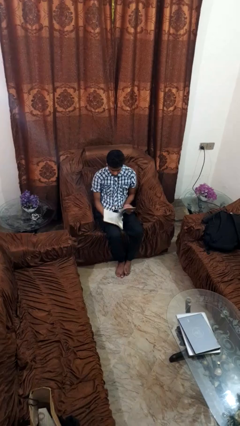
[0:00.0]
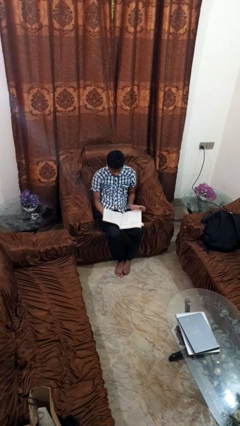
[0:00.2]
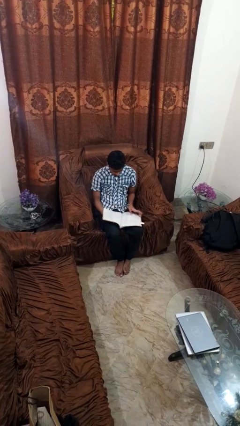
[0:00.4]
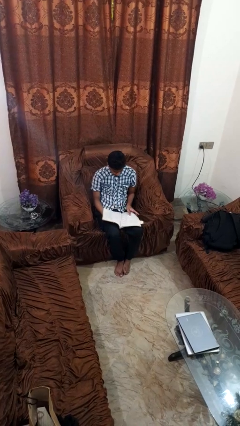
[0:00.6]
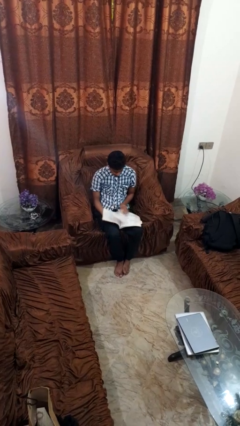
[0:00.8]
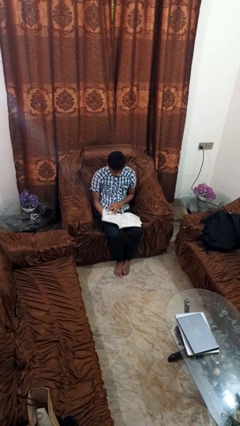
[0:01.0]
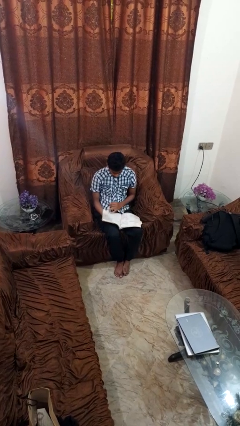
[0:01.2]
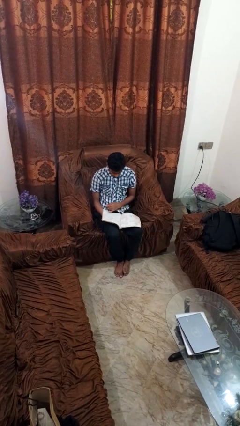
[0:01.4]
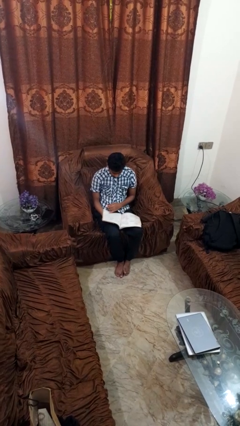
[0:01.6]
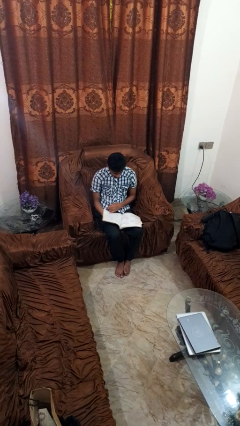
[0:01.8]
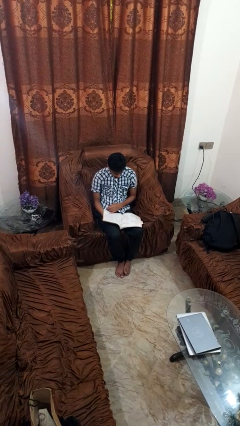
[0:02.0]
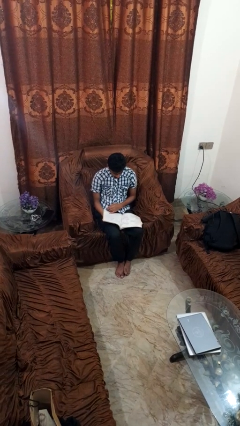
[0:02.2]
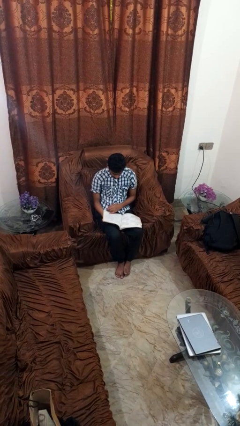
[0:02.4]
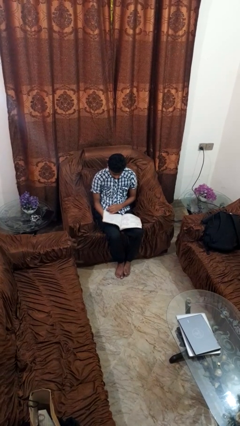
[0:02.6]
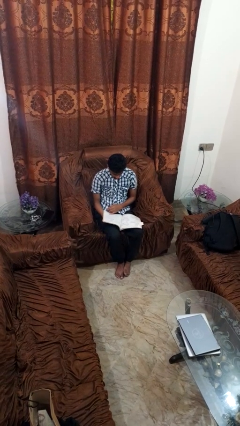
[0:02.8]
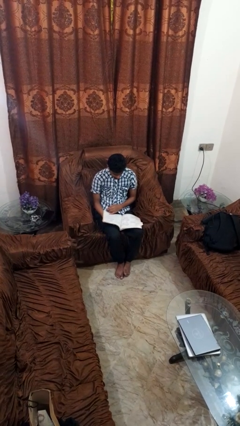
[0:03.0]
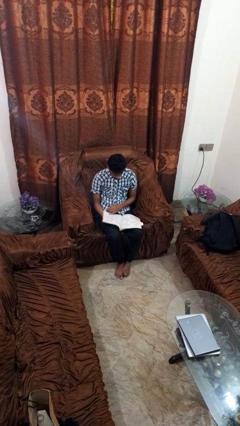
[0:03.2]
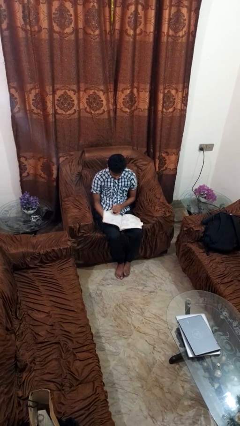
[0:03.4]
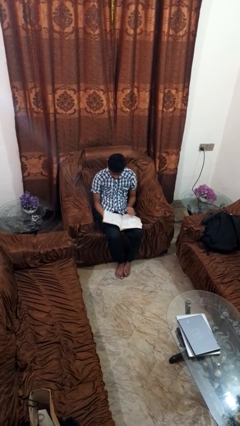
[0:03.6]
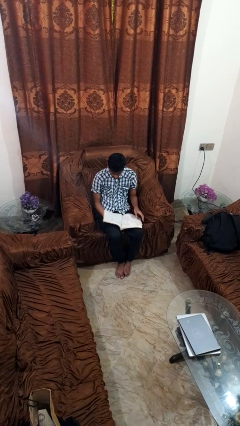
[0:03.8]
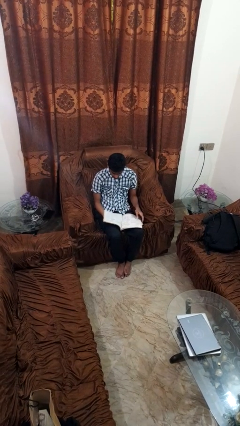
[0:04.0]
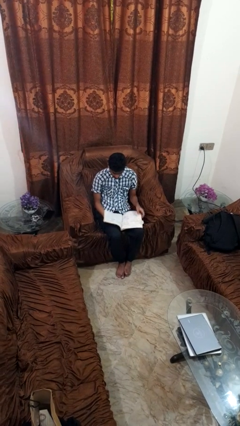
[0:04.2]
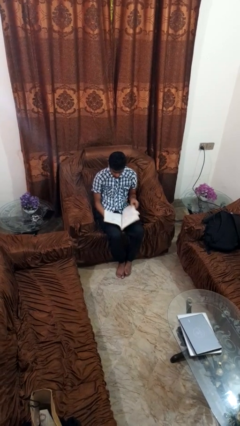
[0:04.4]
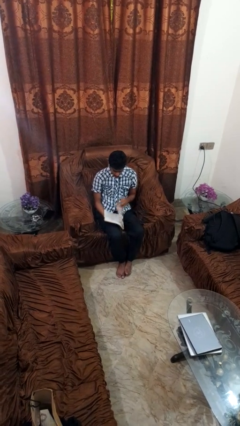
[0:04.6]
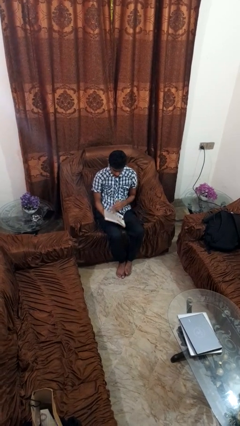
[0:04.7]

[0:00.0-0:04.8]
person reads magazine

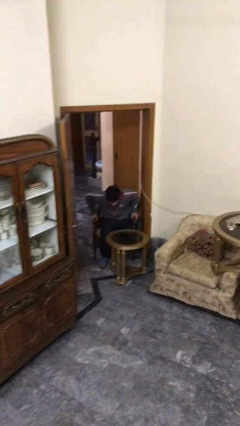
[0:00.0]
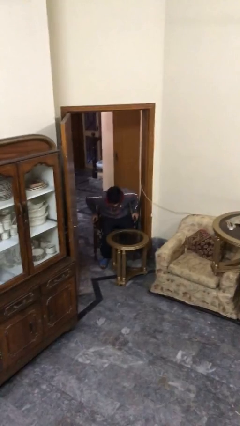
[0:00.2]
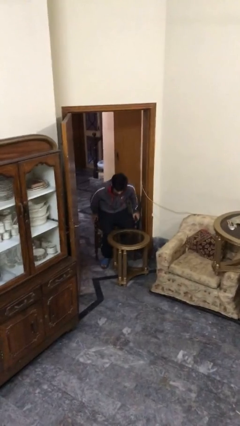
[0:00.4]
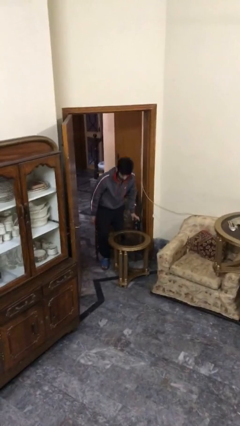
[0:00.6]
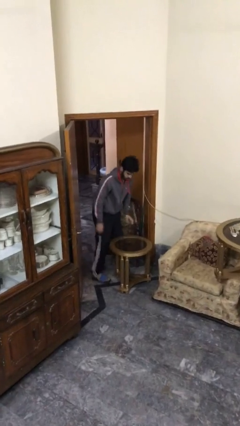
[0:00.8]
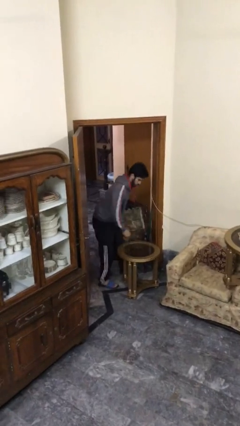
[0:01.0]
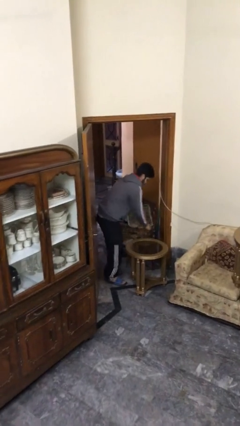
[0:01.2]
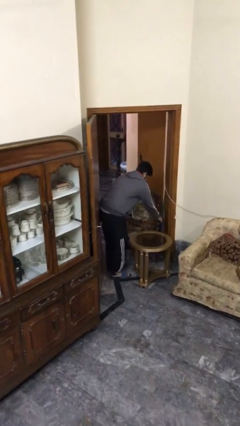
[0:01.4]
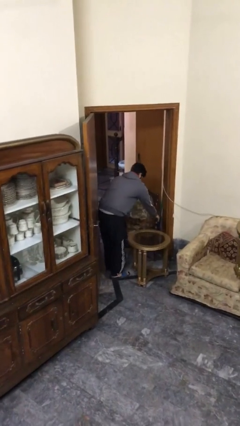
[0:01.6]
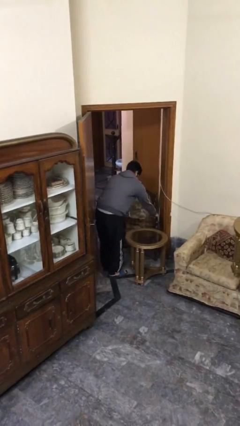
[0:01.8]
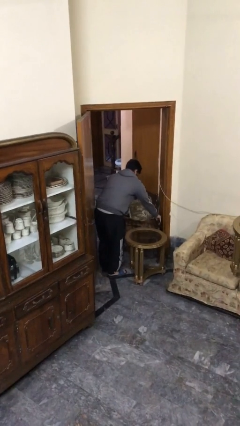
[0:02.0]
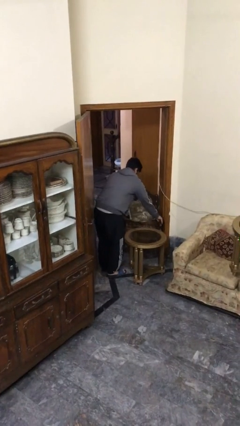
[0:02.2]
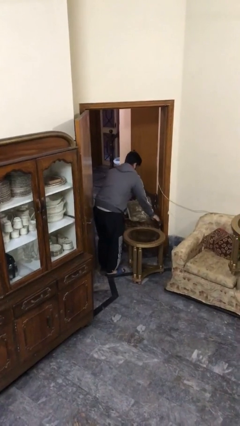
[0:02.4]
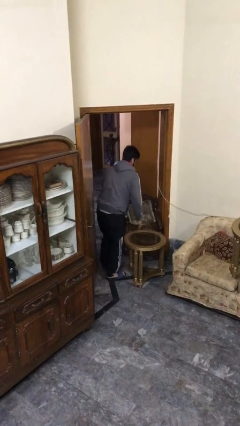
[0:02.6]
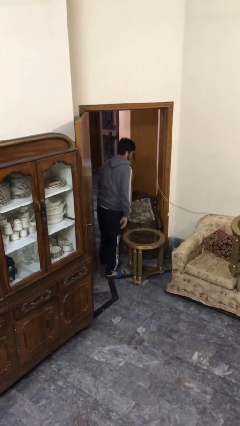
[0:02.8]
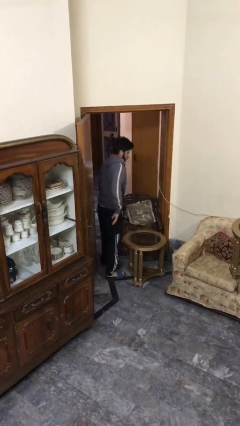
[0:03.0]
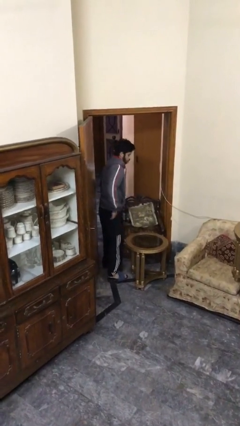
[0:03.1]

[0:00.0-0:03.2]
person stands up

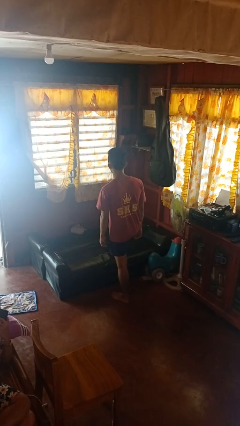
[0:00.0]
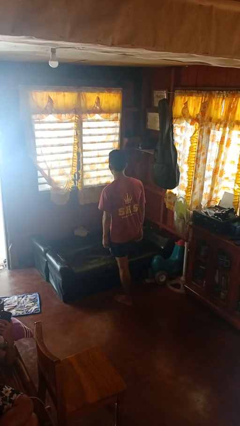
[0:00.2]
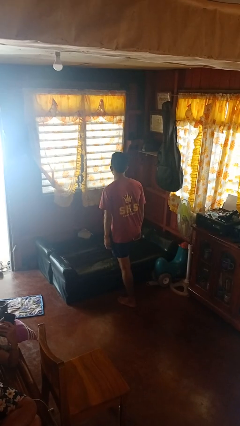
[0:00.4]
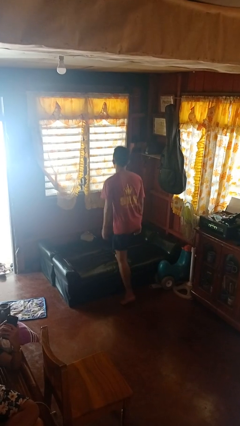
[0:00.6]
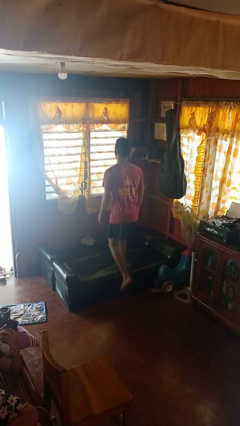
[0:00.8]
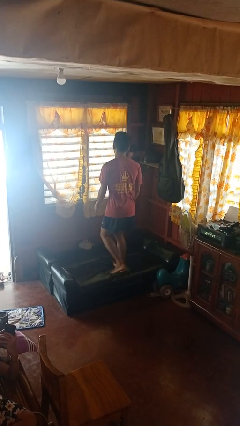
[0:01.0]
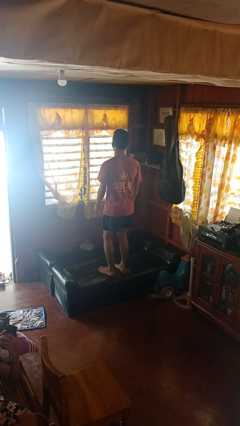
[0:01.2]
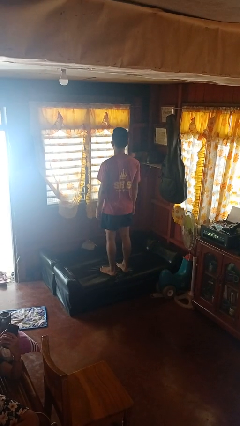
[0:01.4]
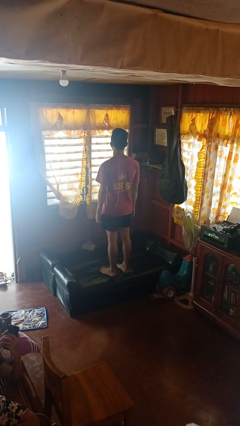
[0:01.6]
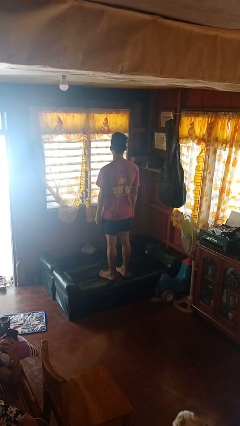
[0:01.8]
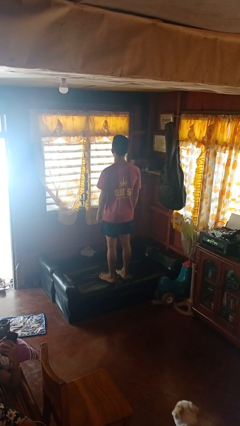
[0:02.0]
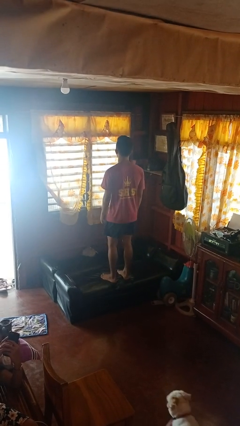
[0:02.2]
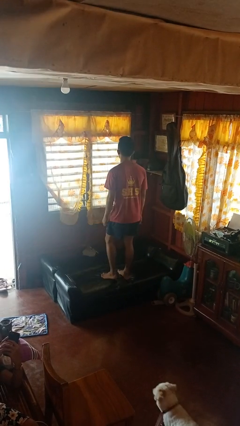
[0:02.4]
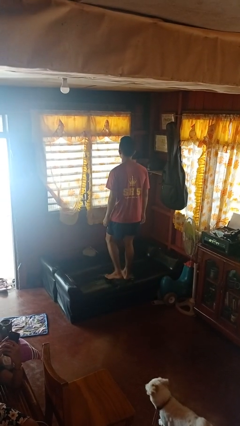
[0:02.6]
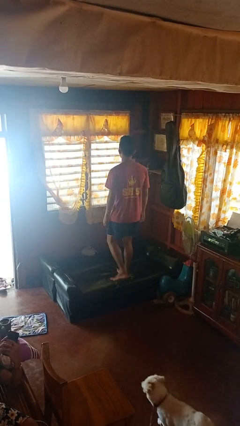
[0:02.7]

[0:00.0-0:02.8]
person climbs on couch

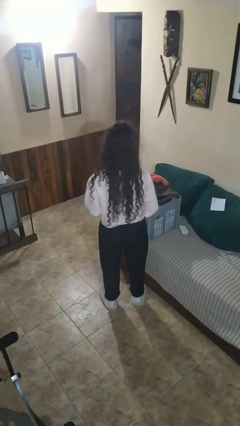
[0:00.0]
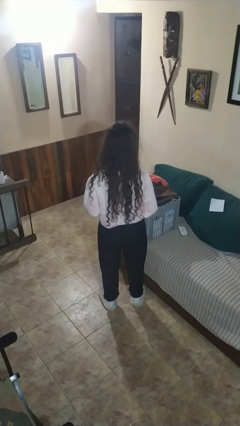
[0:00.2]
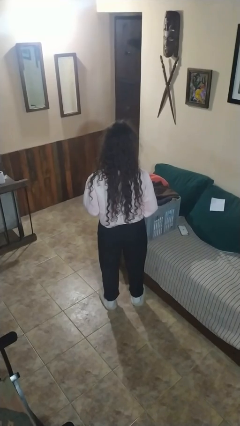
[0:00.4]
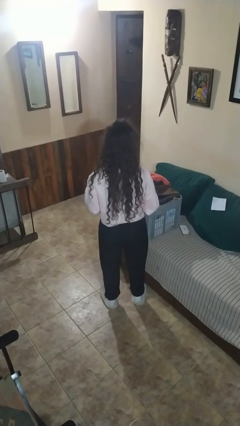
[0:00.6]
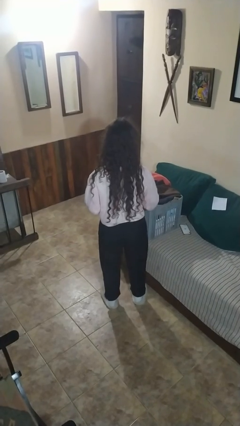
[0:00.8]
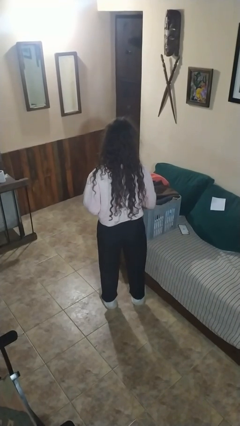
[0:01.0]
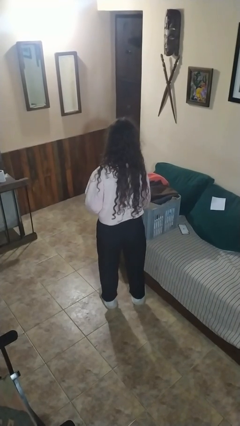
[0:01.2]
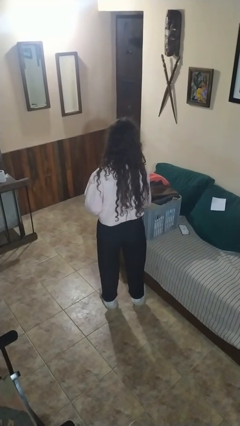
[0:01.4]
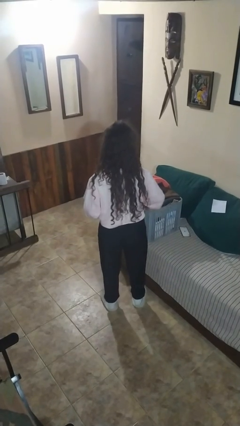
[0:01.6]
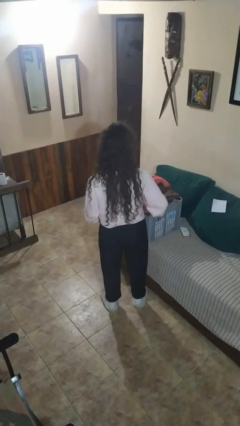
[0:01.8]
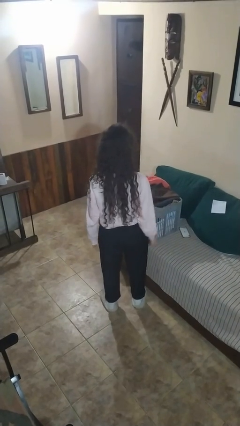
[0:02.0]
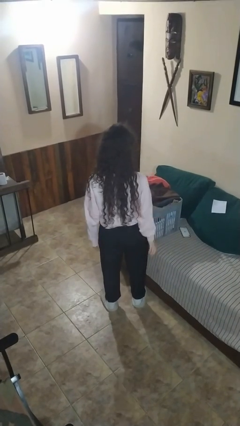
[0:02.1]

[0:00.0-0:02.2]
person puts object into basket

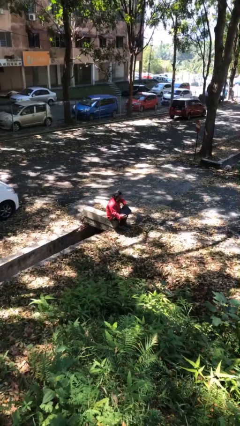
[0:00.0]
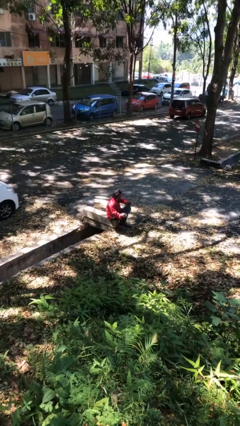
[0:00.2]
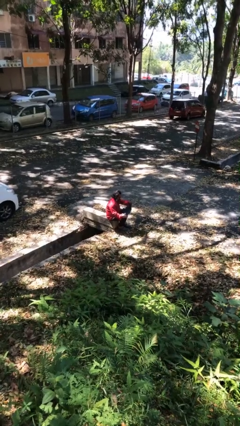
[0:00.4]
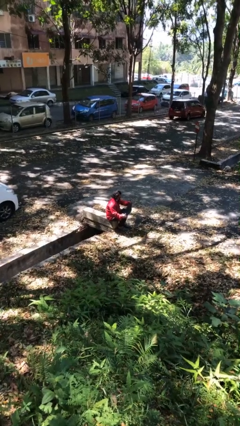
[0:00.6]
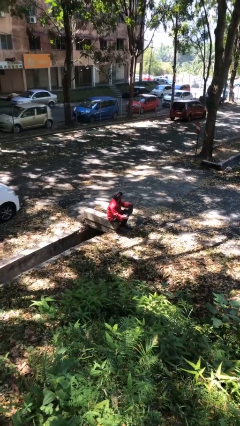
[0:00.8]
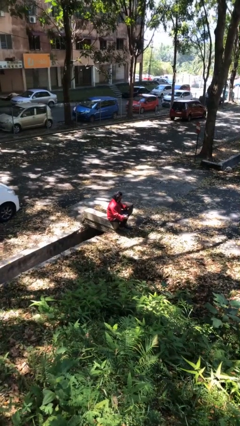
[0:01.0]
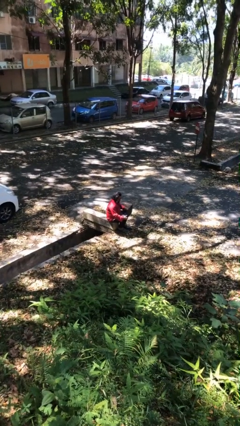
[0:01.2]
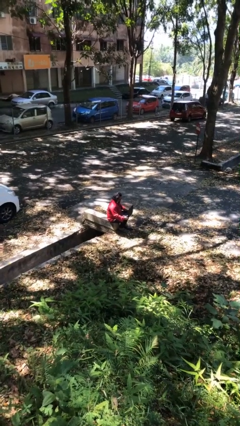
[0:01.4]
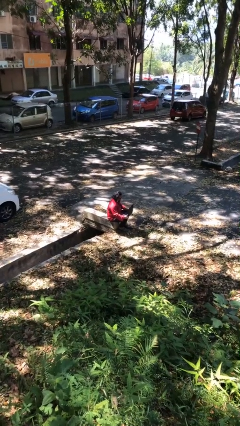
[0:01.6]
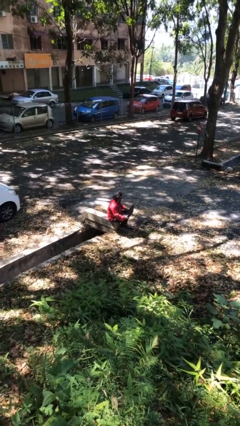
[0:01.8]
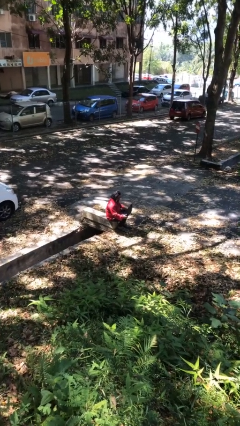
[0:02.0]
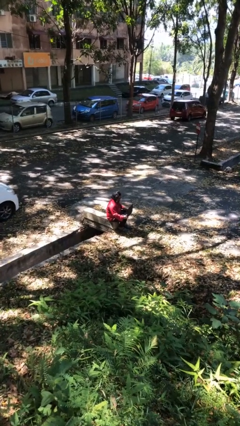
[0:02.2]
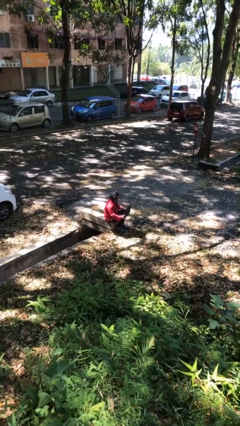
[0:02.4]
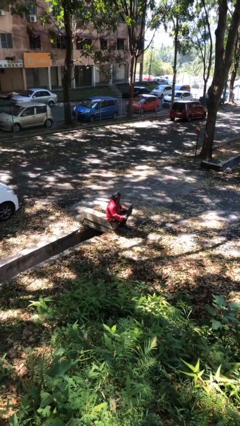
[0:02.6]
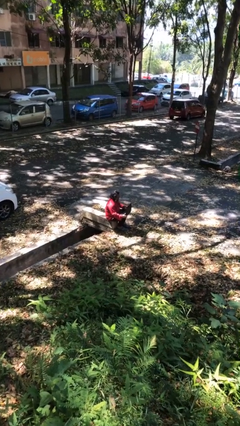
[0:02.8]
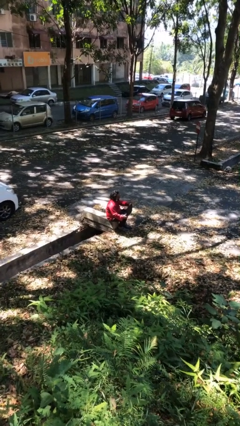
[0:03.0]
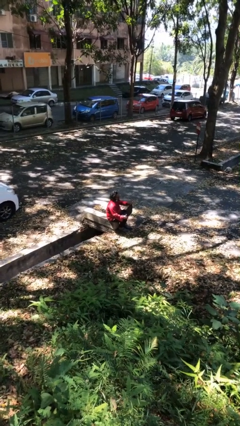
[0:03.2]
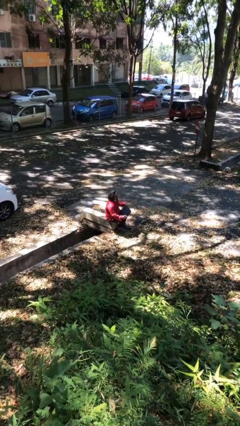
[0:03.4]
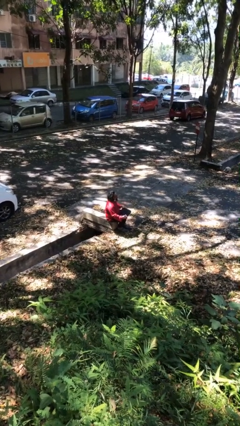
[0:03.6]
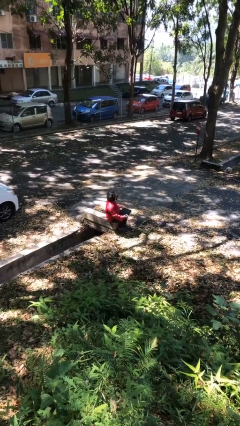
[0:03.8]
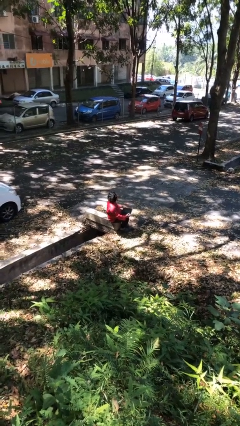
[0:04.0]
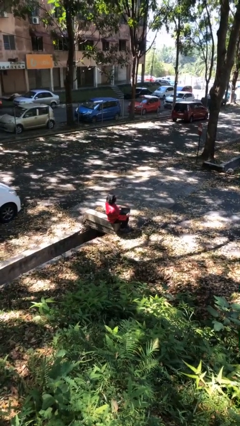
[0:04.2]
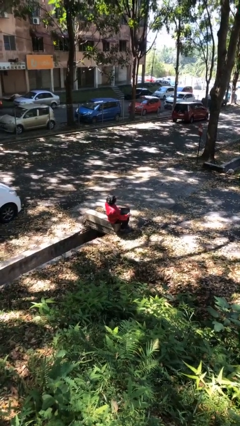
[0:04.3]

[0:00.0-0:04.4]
person interacts with laptop
